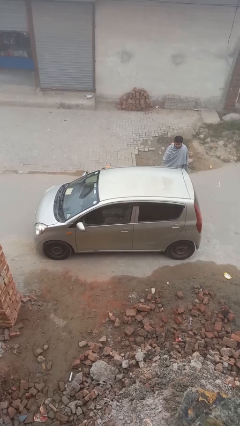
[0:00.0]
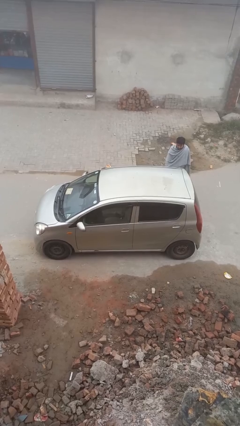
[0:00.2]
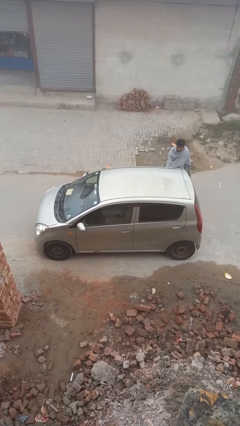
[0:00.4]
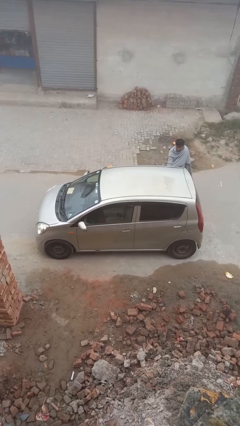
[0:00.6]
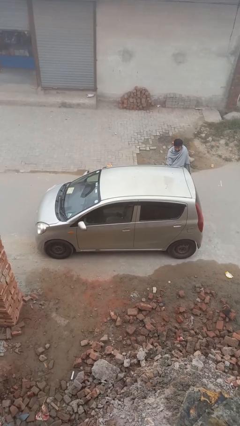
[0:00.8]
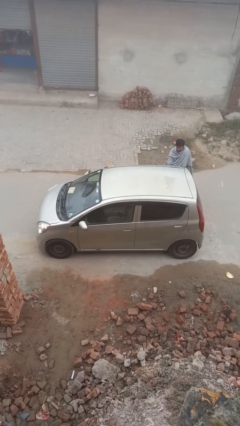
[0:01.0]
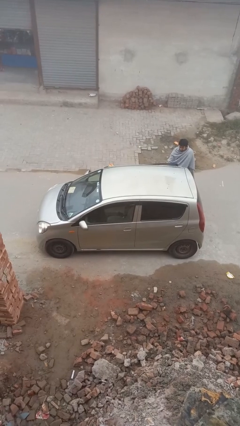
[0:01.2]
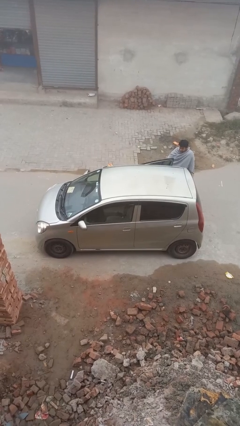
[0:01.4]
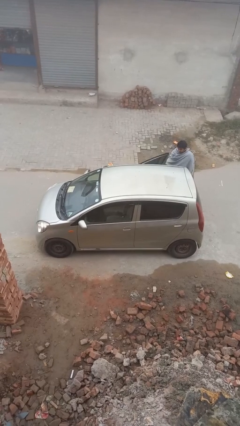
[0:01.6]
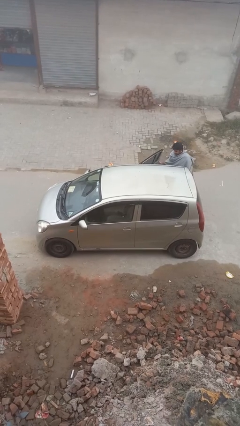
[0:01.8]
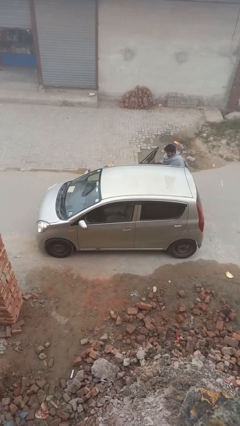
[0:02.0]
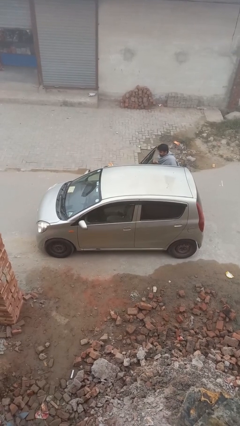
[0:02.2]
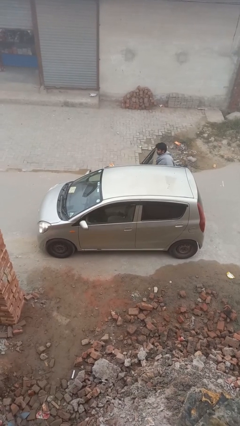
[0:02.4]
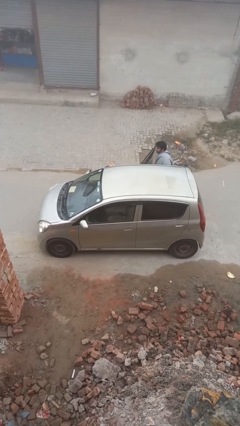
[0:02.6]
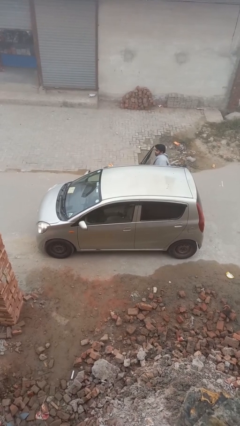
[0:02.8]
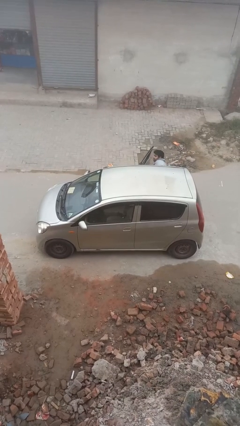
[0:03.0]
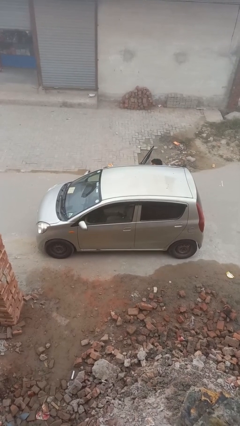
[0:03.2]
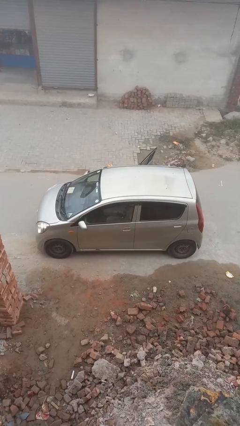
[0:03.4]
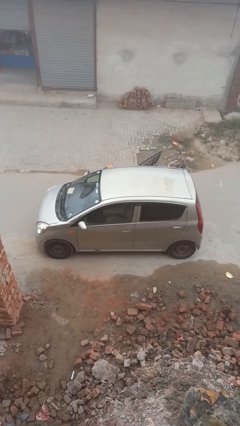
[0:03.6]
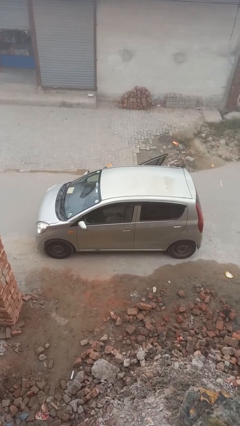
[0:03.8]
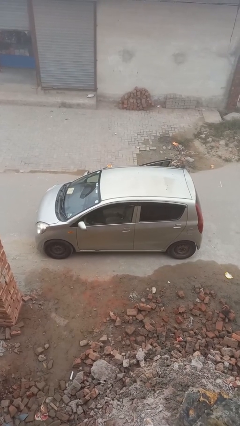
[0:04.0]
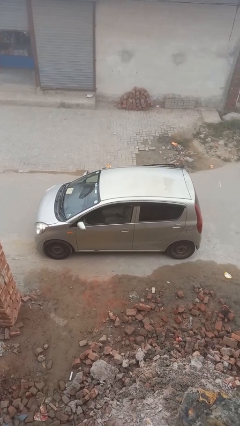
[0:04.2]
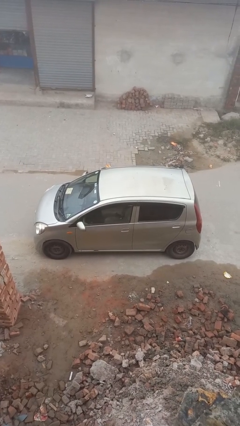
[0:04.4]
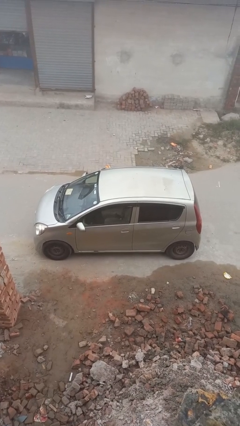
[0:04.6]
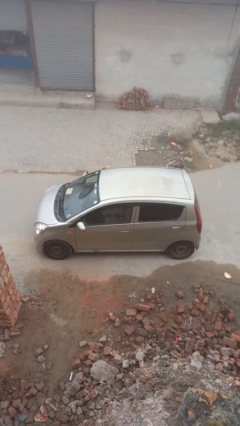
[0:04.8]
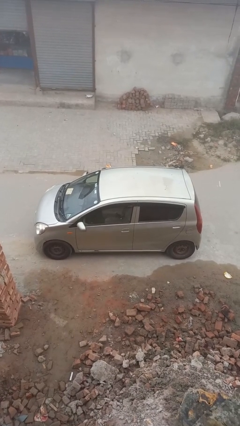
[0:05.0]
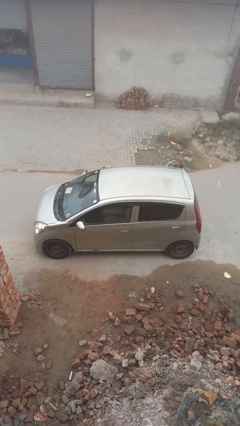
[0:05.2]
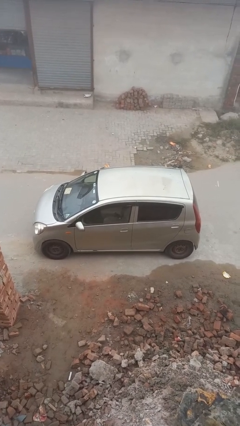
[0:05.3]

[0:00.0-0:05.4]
car picks up person

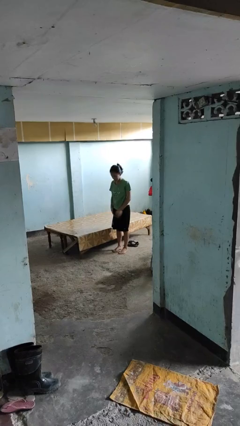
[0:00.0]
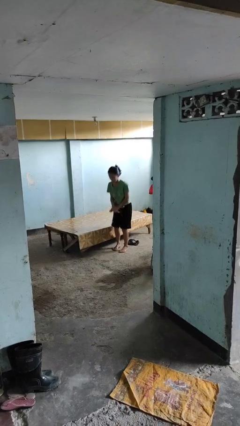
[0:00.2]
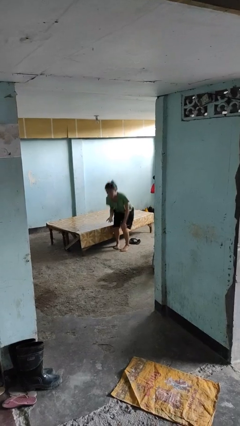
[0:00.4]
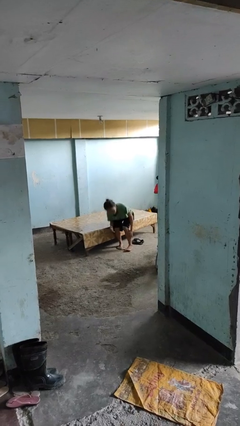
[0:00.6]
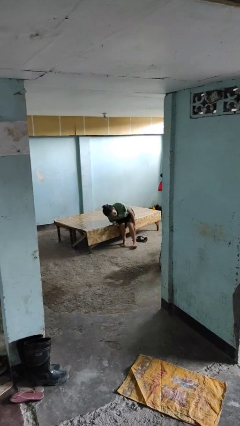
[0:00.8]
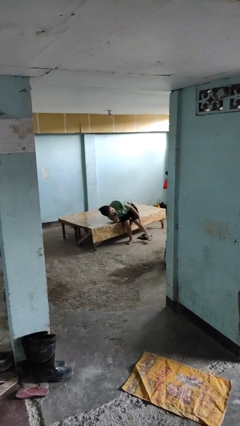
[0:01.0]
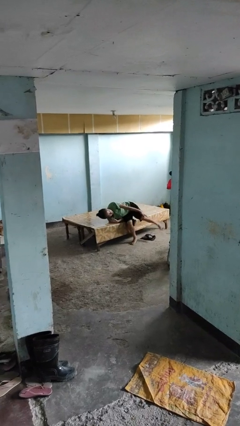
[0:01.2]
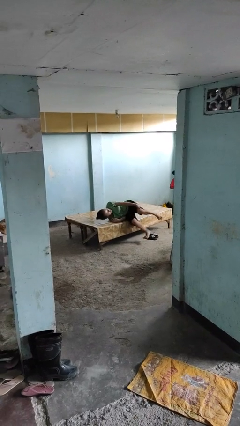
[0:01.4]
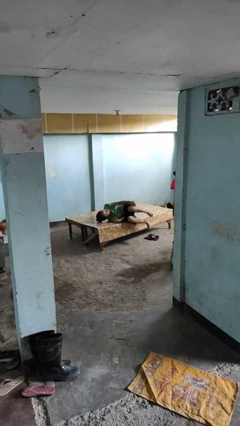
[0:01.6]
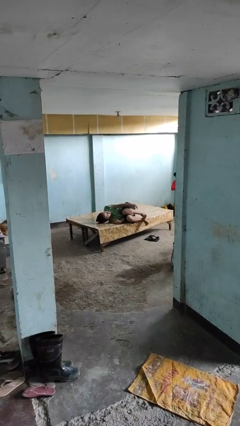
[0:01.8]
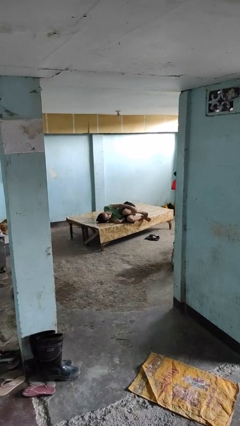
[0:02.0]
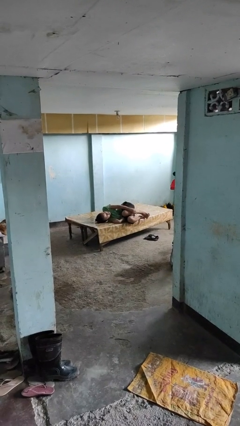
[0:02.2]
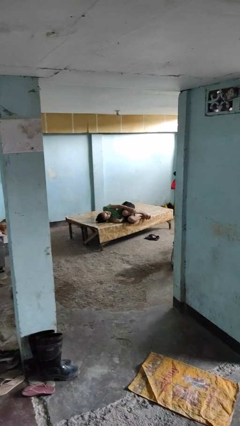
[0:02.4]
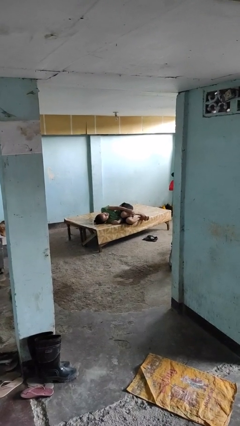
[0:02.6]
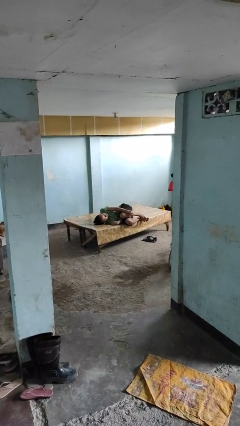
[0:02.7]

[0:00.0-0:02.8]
person lies down on bed

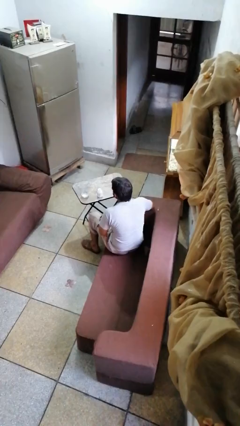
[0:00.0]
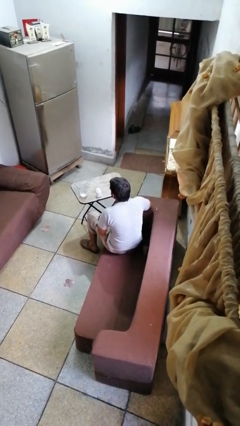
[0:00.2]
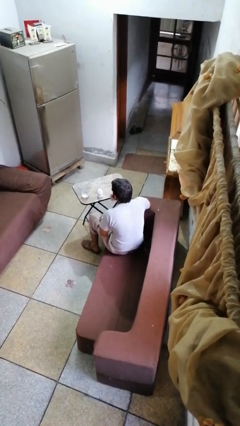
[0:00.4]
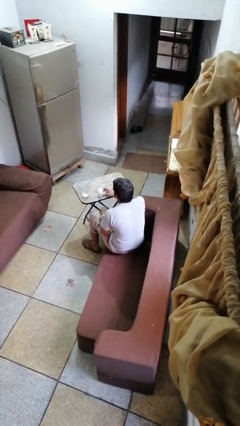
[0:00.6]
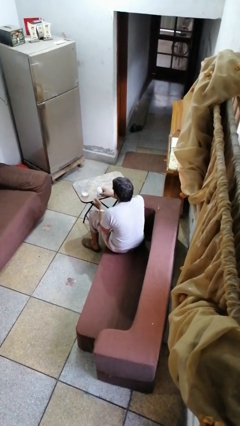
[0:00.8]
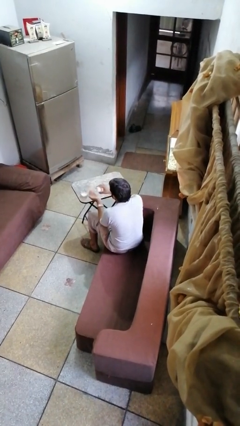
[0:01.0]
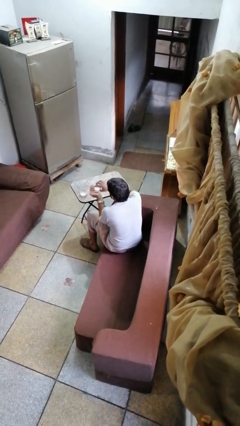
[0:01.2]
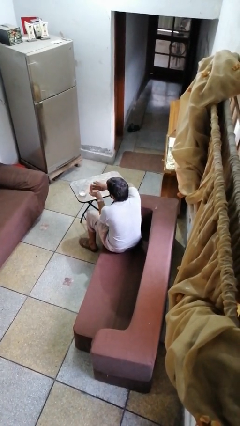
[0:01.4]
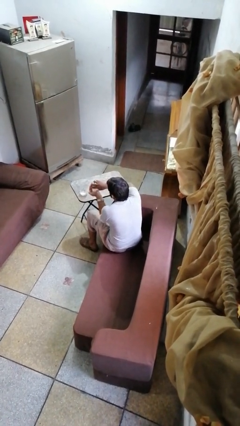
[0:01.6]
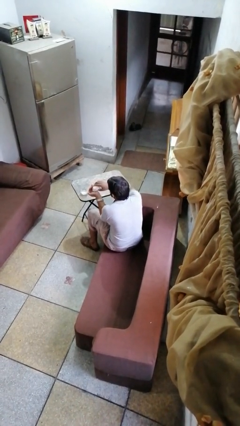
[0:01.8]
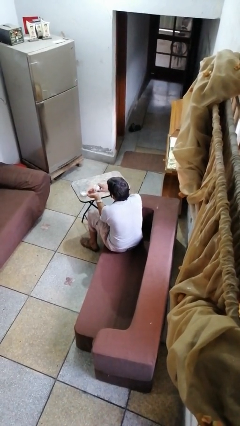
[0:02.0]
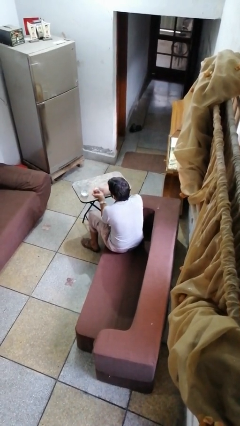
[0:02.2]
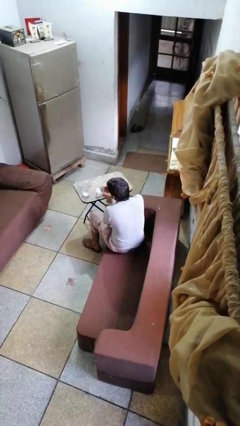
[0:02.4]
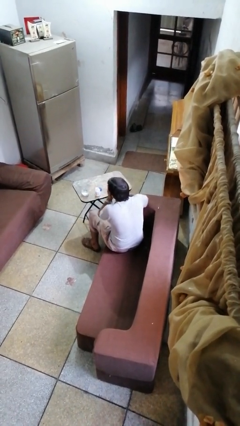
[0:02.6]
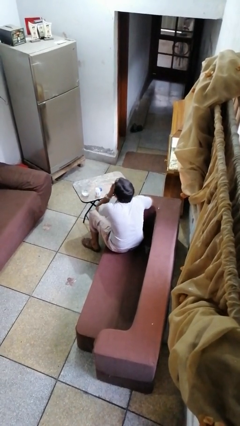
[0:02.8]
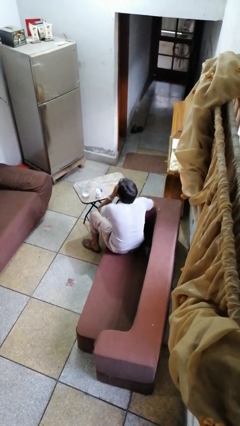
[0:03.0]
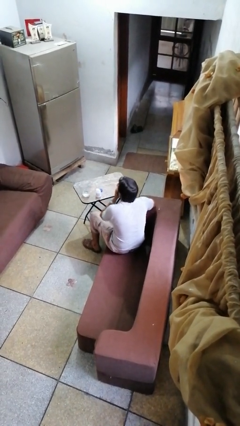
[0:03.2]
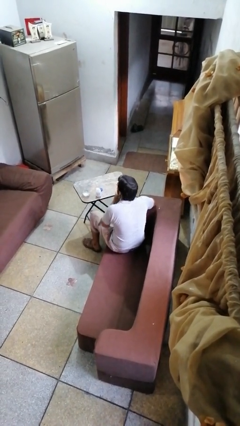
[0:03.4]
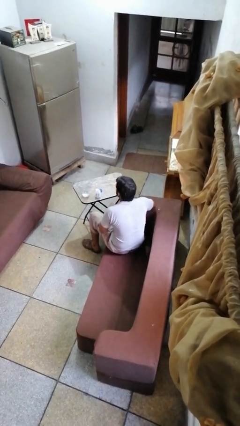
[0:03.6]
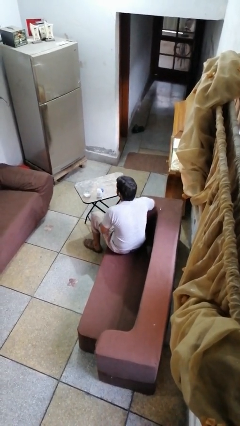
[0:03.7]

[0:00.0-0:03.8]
person takes medicine pills

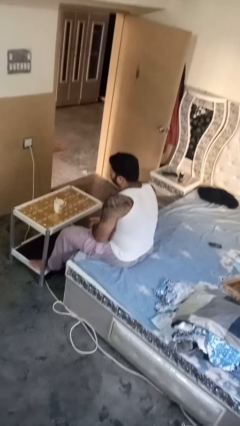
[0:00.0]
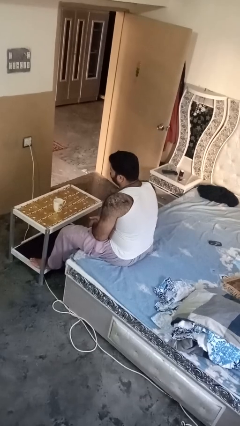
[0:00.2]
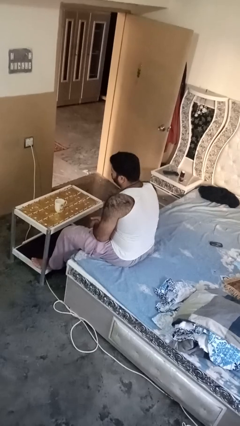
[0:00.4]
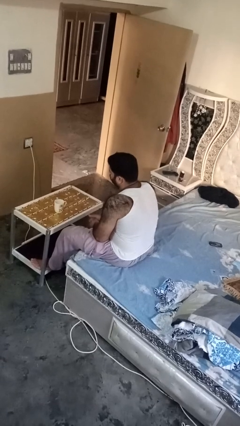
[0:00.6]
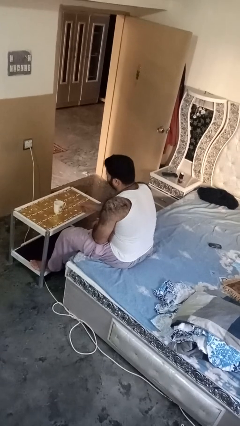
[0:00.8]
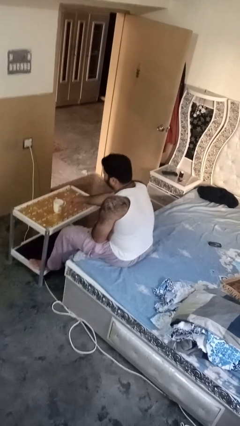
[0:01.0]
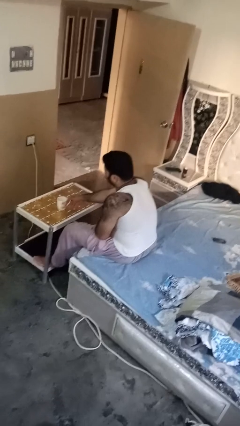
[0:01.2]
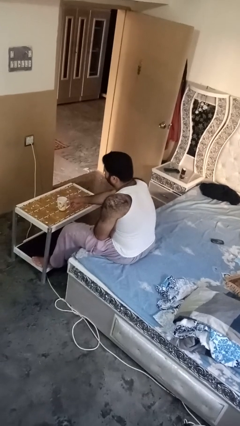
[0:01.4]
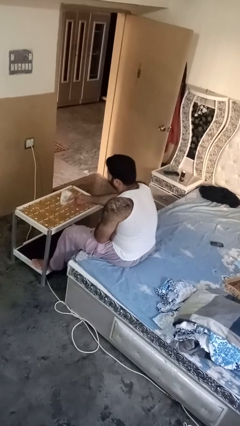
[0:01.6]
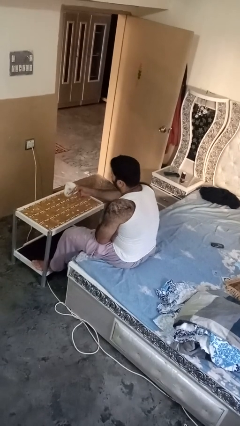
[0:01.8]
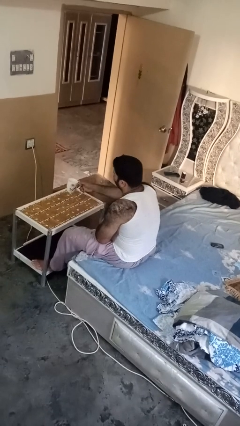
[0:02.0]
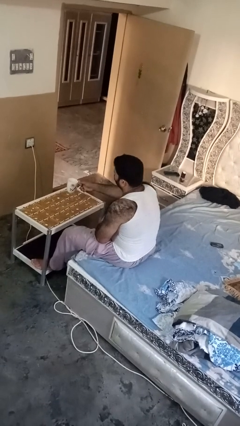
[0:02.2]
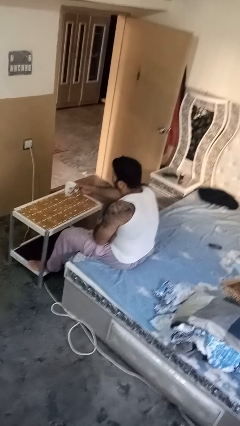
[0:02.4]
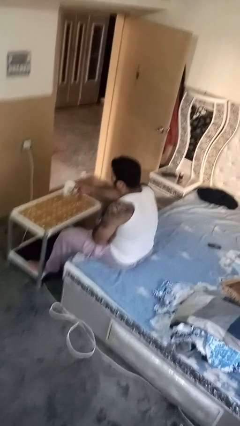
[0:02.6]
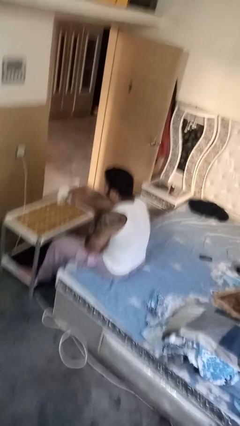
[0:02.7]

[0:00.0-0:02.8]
person picks up object from table

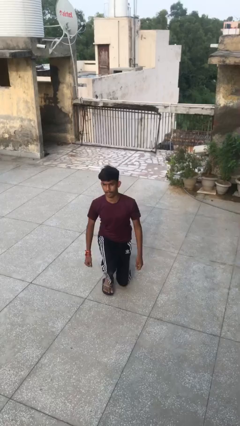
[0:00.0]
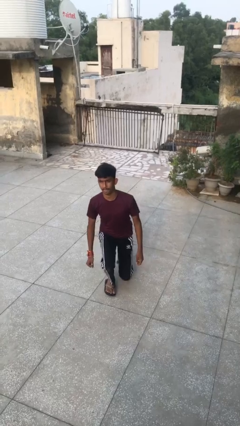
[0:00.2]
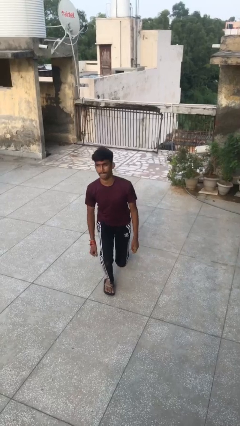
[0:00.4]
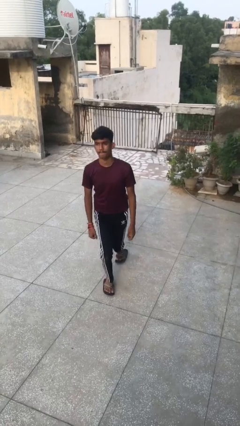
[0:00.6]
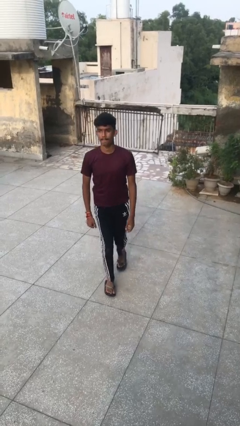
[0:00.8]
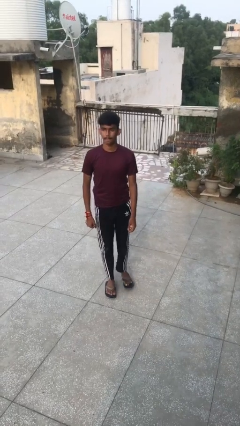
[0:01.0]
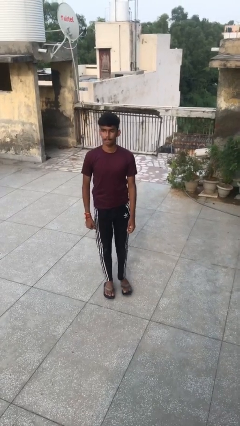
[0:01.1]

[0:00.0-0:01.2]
person stands up from floor

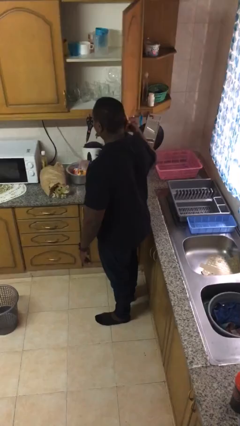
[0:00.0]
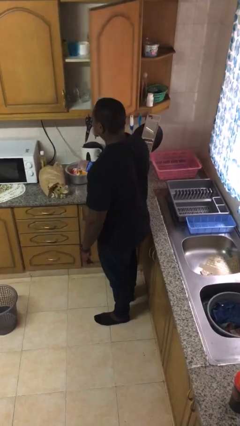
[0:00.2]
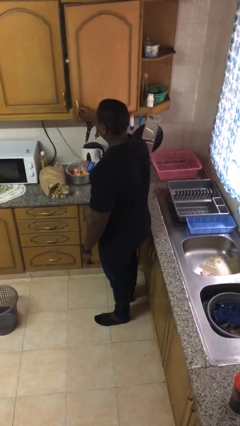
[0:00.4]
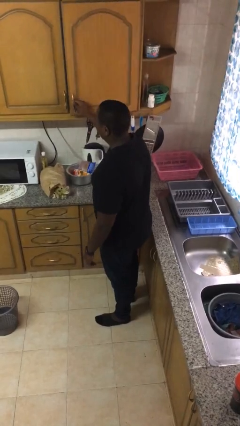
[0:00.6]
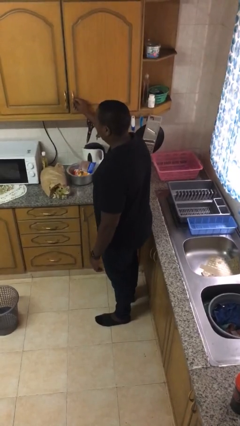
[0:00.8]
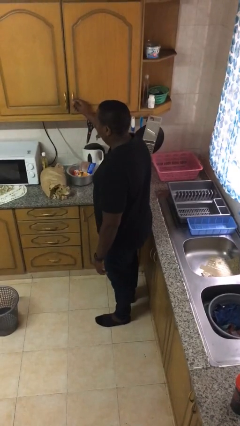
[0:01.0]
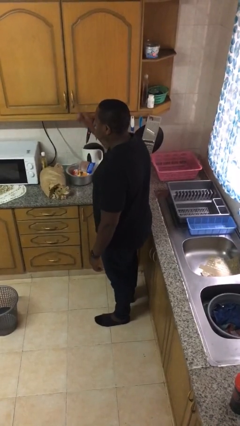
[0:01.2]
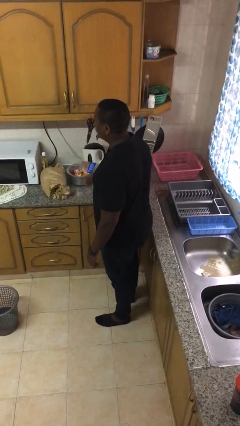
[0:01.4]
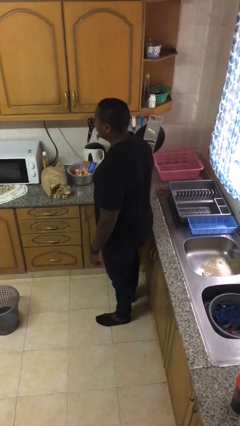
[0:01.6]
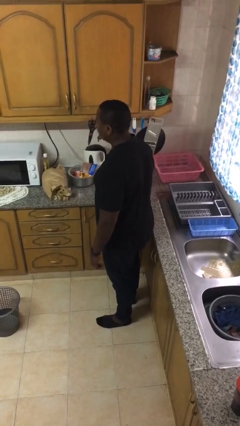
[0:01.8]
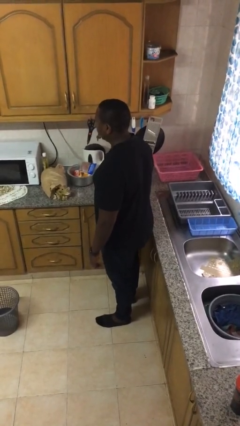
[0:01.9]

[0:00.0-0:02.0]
person closes cabinet
